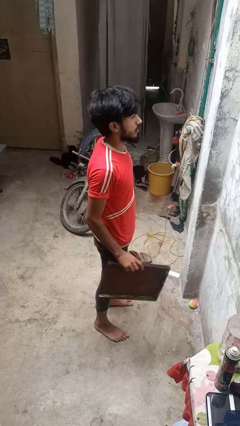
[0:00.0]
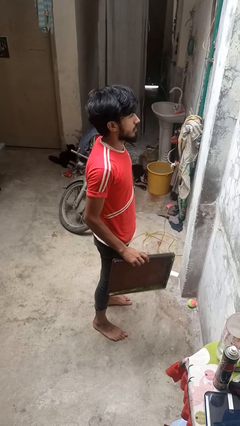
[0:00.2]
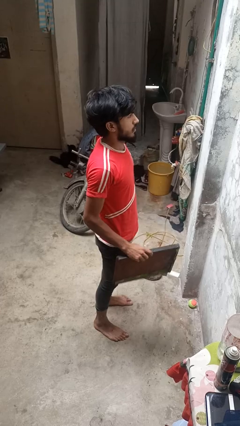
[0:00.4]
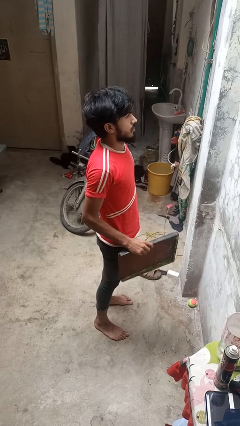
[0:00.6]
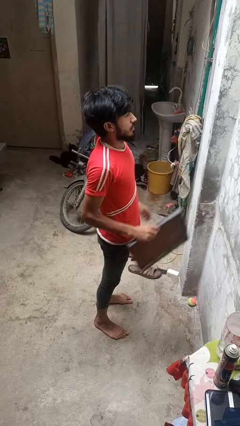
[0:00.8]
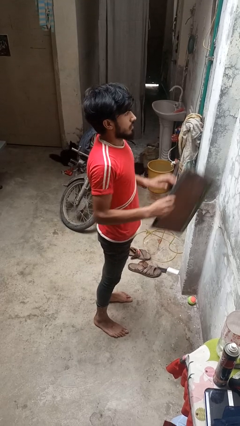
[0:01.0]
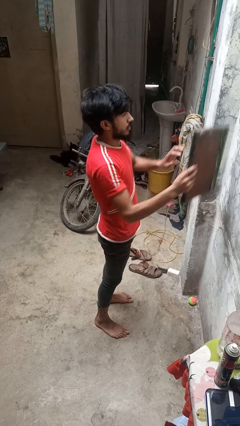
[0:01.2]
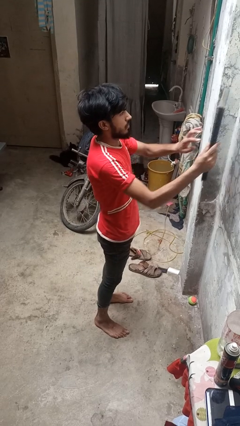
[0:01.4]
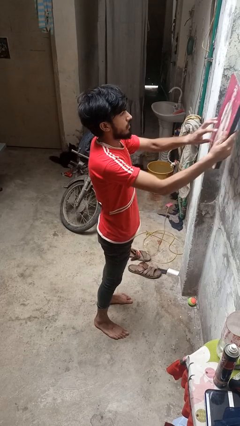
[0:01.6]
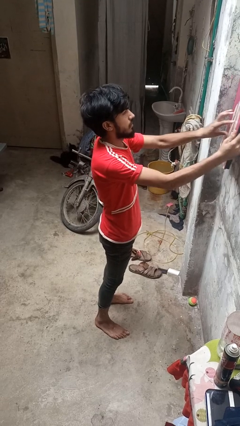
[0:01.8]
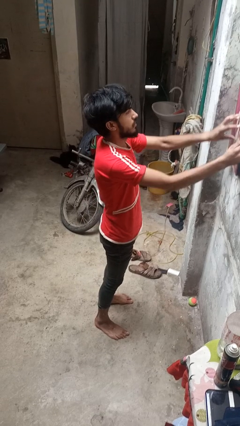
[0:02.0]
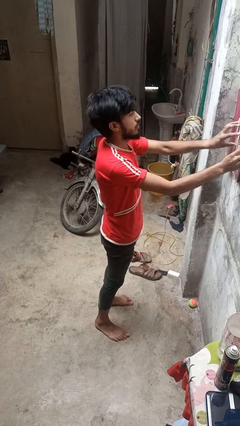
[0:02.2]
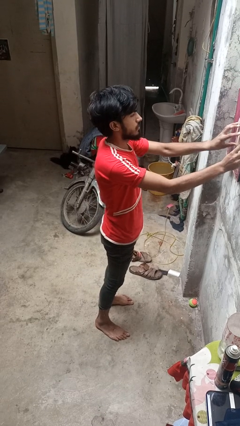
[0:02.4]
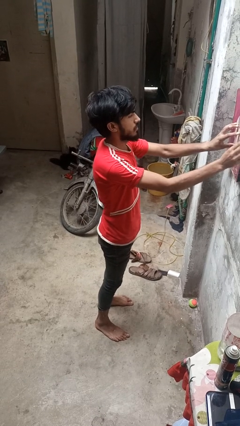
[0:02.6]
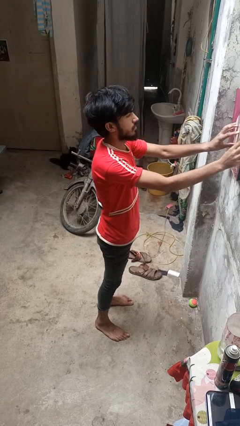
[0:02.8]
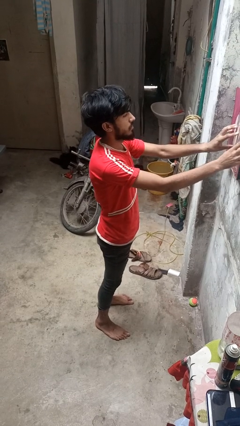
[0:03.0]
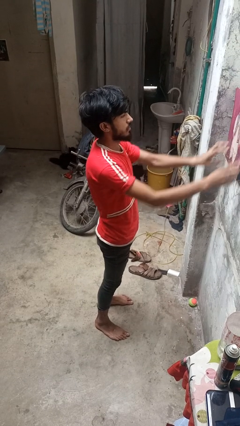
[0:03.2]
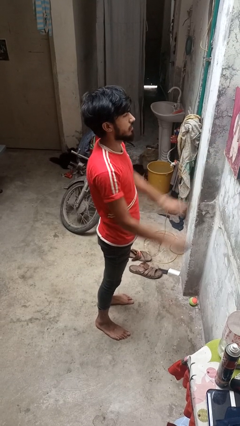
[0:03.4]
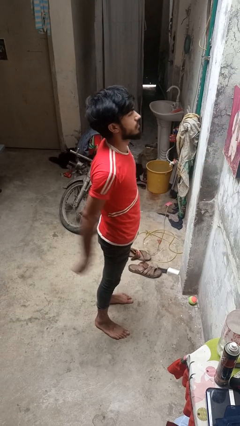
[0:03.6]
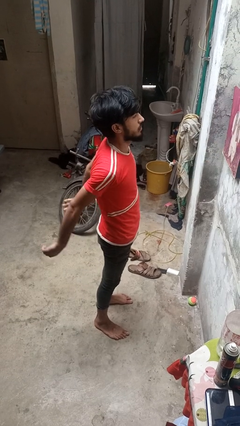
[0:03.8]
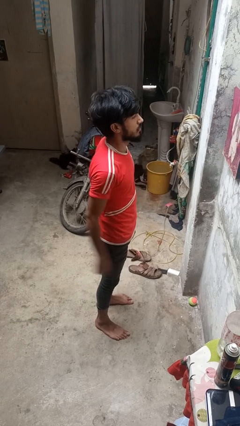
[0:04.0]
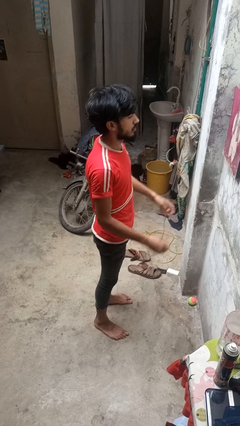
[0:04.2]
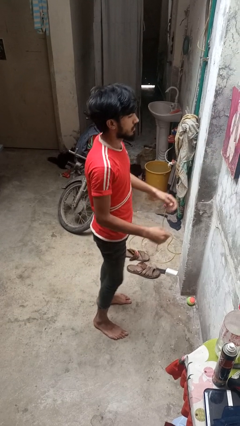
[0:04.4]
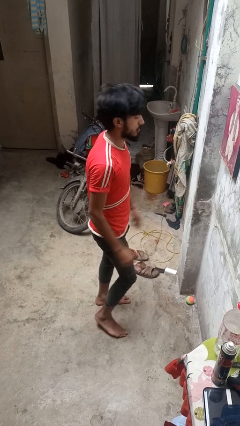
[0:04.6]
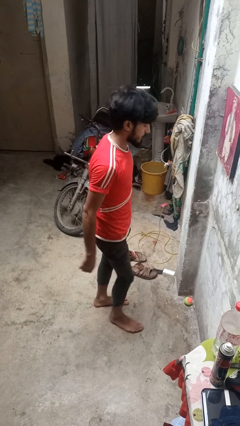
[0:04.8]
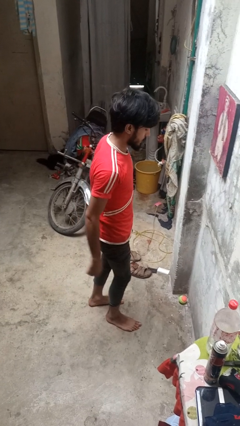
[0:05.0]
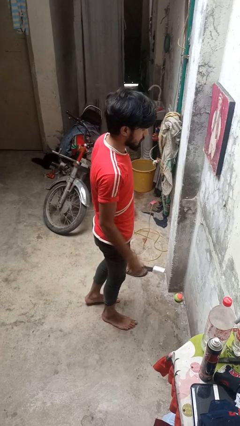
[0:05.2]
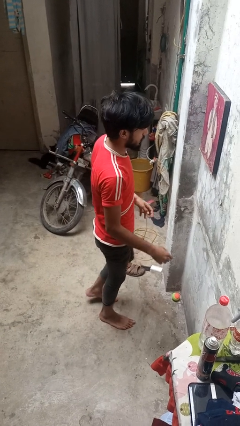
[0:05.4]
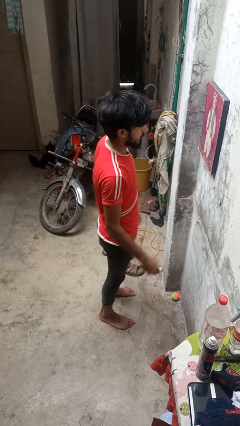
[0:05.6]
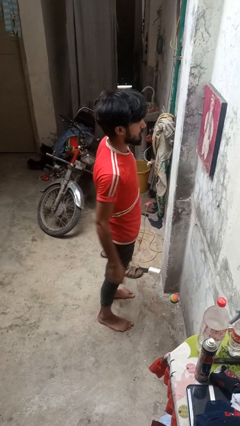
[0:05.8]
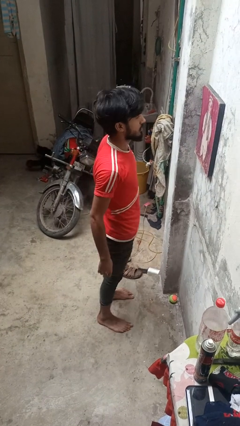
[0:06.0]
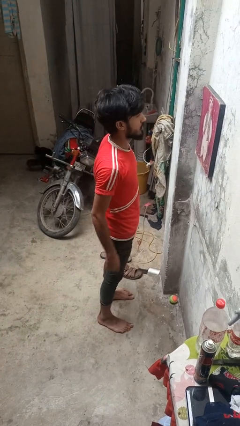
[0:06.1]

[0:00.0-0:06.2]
person puts up picture frame

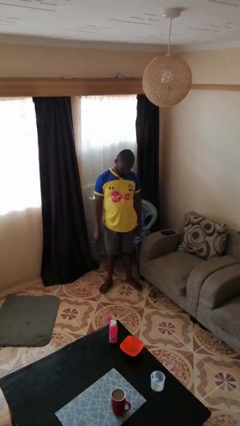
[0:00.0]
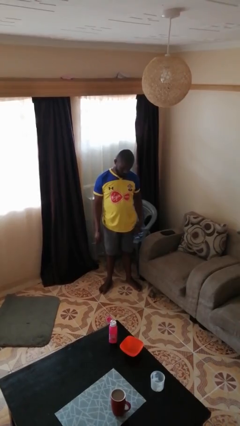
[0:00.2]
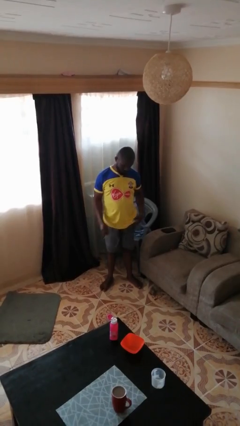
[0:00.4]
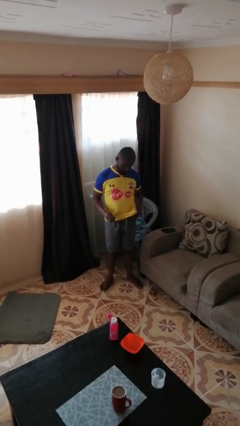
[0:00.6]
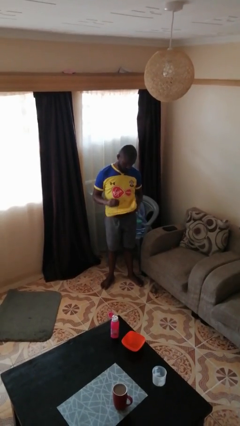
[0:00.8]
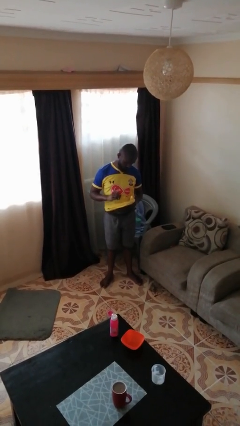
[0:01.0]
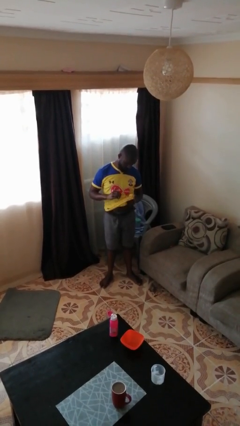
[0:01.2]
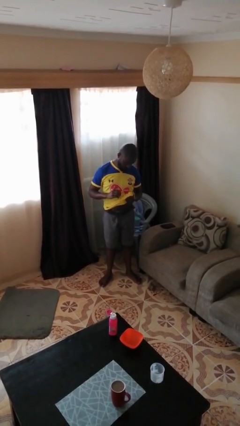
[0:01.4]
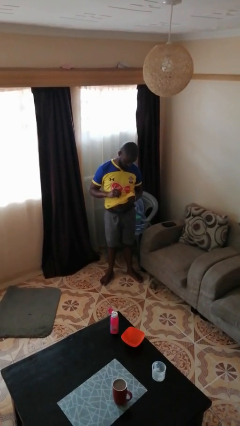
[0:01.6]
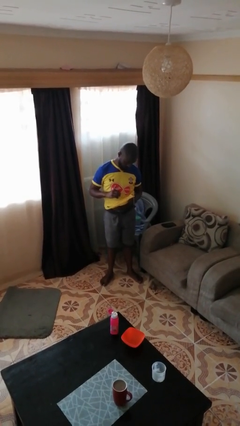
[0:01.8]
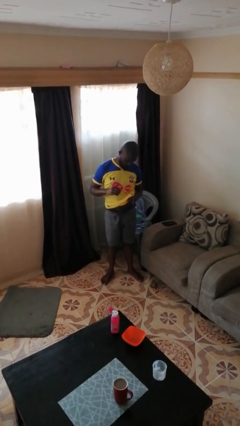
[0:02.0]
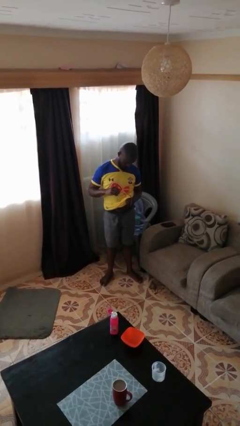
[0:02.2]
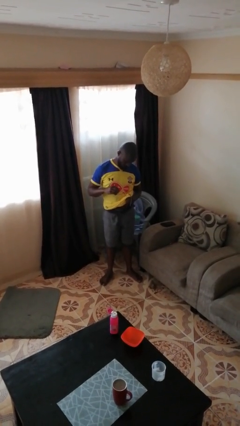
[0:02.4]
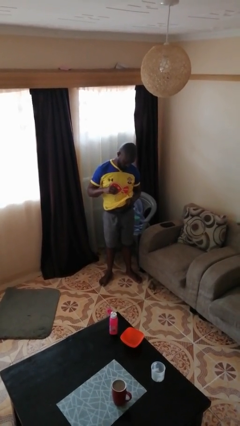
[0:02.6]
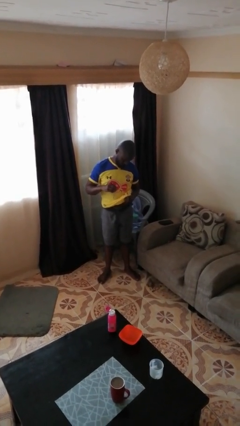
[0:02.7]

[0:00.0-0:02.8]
person cleans eyeglasses

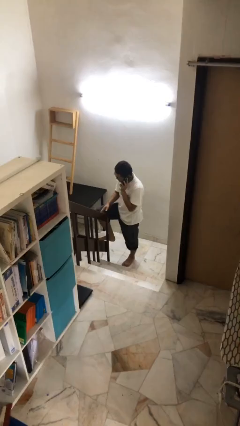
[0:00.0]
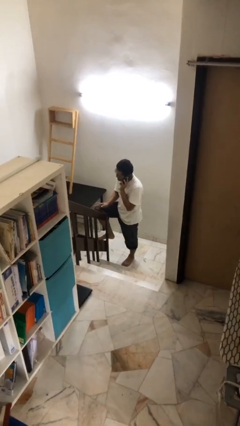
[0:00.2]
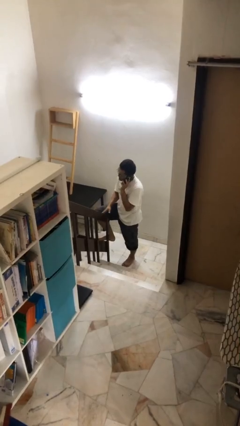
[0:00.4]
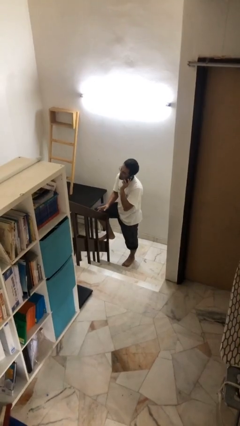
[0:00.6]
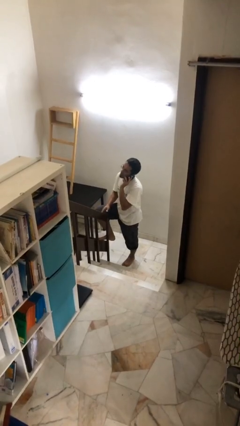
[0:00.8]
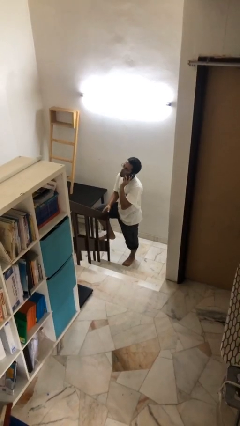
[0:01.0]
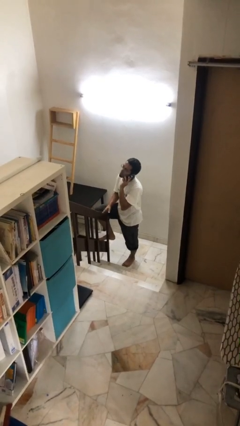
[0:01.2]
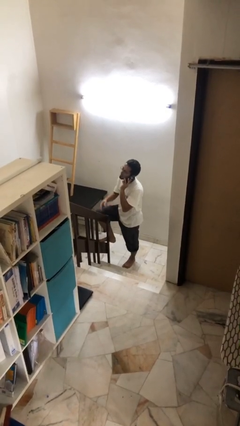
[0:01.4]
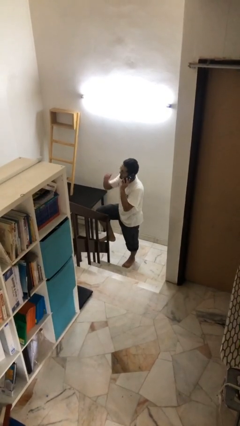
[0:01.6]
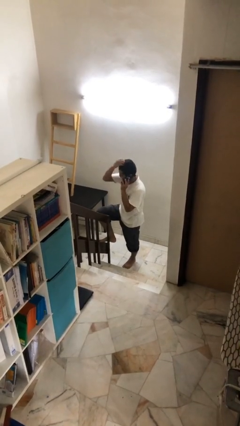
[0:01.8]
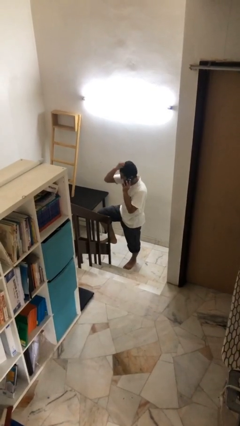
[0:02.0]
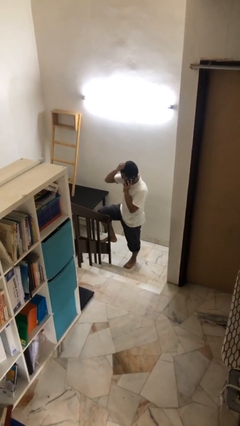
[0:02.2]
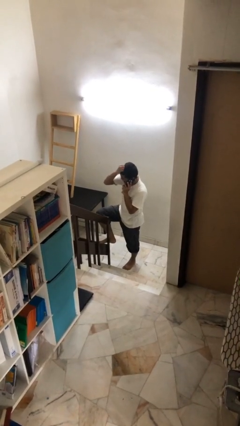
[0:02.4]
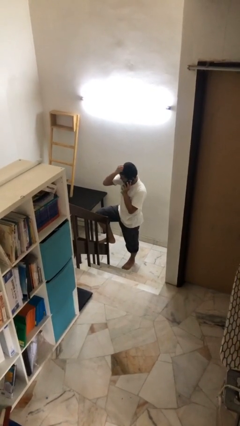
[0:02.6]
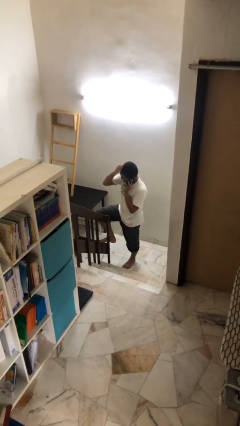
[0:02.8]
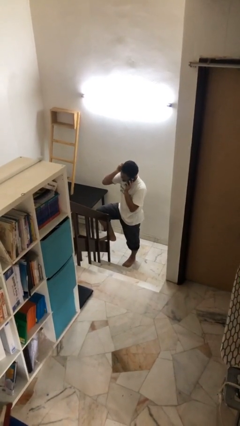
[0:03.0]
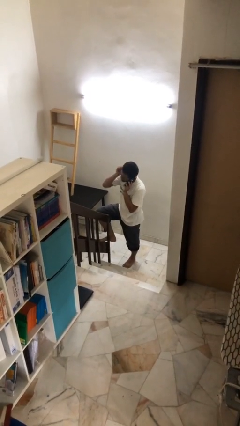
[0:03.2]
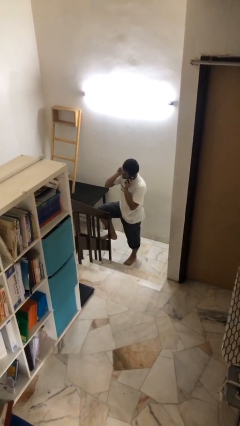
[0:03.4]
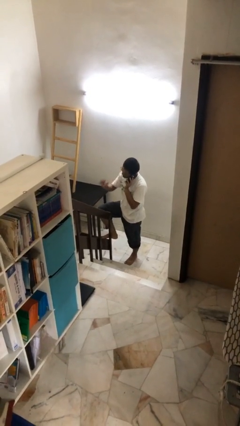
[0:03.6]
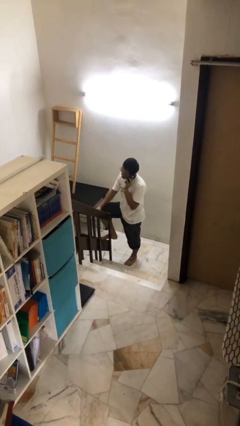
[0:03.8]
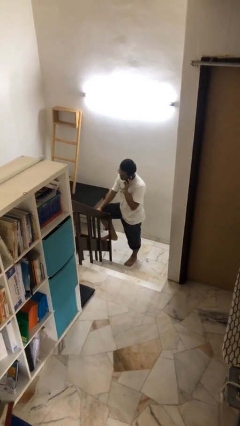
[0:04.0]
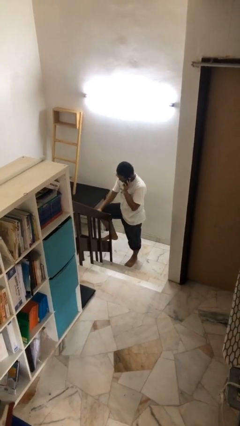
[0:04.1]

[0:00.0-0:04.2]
person talks on phone

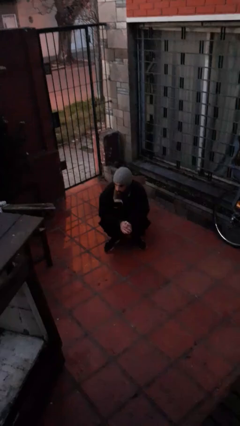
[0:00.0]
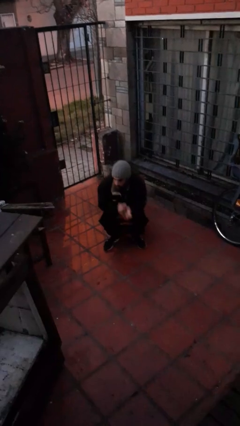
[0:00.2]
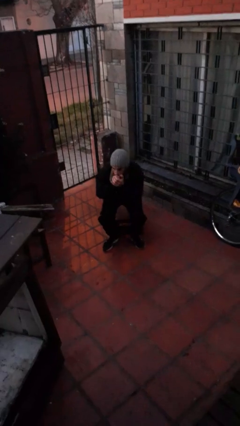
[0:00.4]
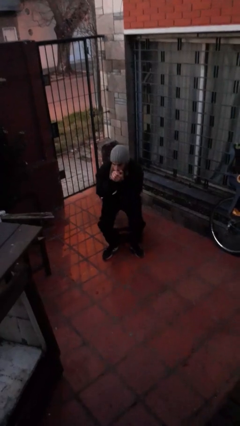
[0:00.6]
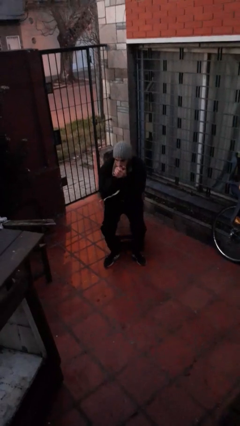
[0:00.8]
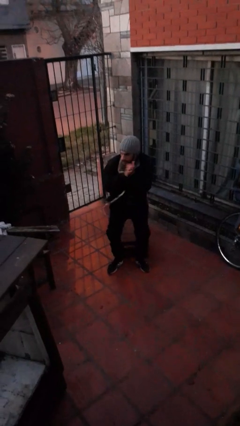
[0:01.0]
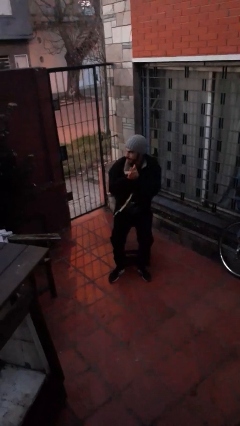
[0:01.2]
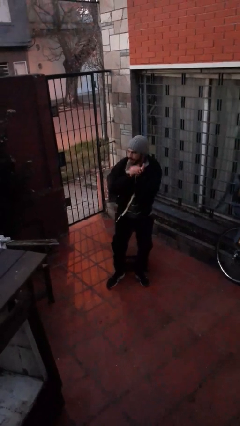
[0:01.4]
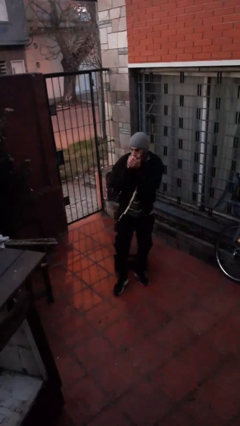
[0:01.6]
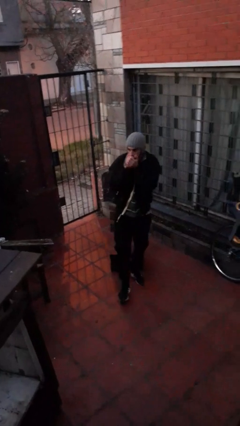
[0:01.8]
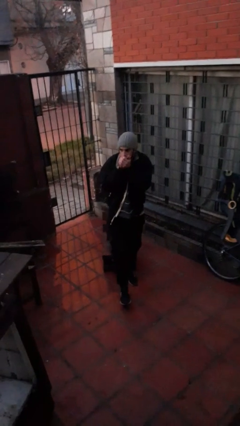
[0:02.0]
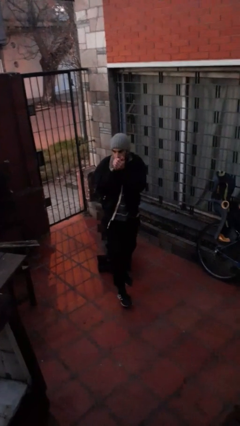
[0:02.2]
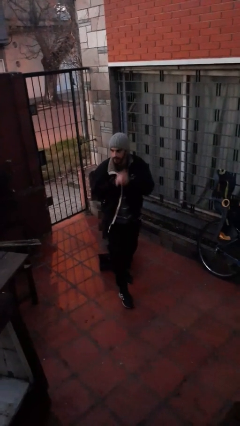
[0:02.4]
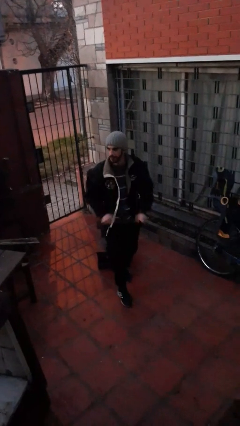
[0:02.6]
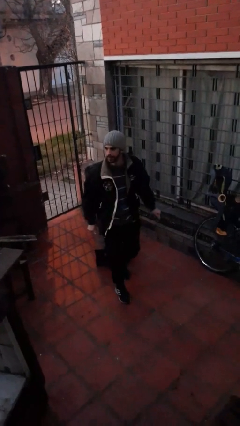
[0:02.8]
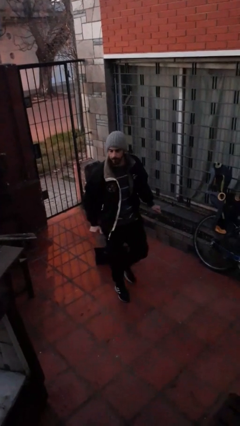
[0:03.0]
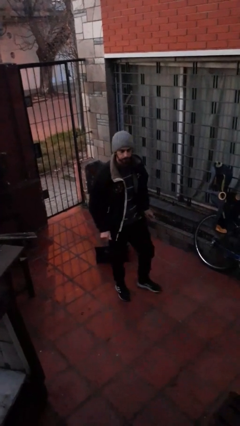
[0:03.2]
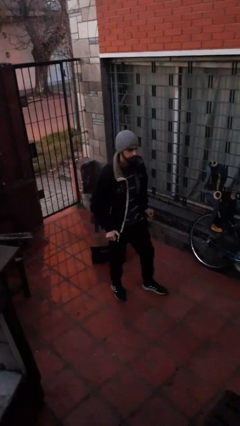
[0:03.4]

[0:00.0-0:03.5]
person blows into hands

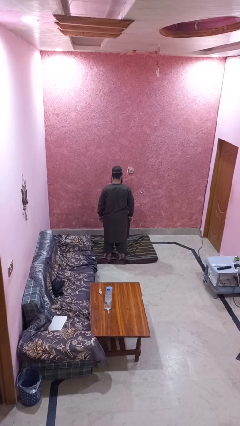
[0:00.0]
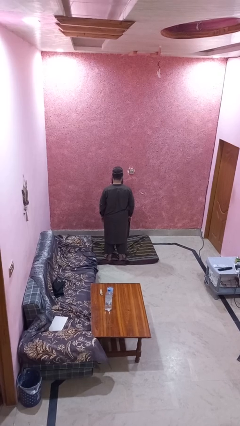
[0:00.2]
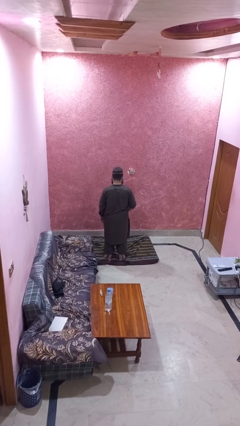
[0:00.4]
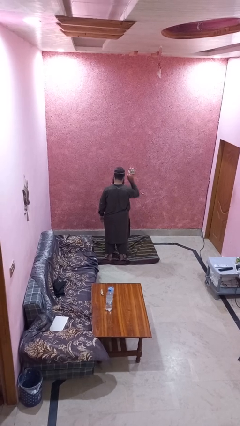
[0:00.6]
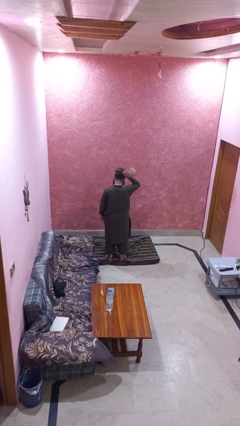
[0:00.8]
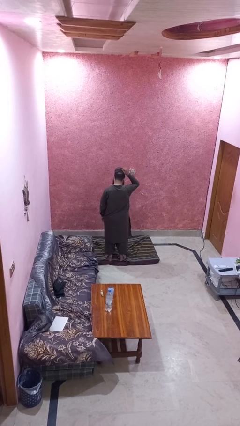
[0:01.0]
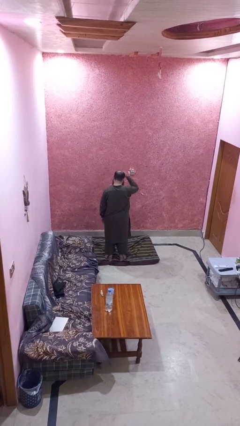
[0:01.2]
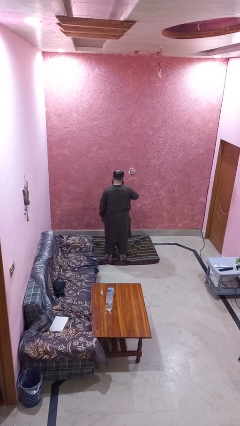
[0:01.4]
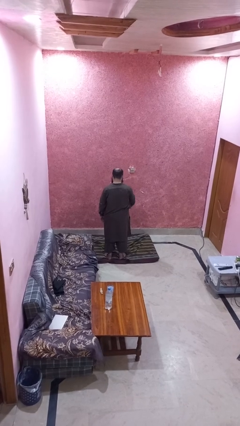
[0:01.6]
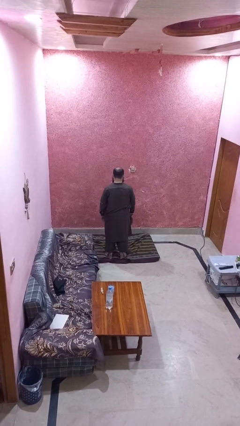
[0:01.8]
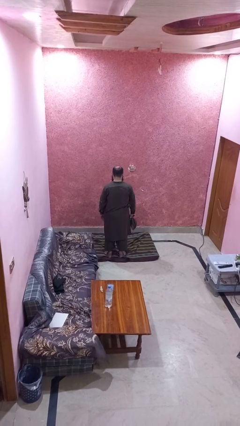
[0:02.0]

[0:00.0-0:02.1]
person takes off hat
